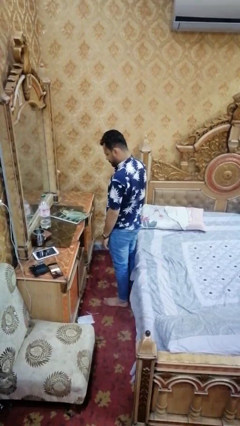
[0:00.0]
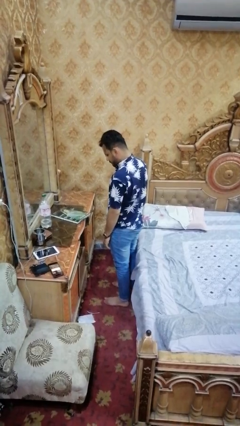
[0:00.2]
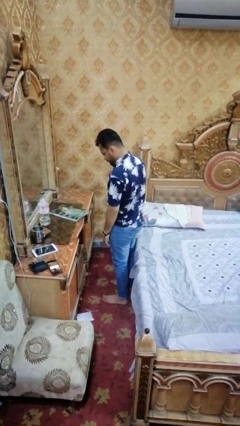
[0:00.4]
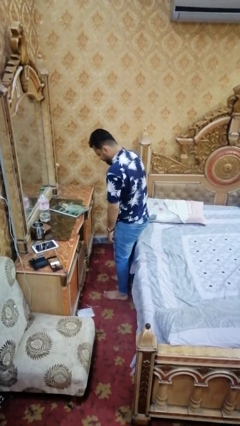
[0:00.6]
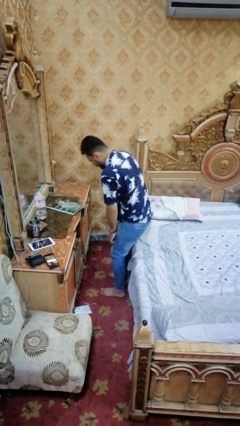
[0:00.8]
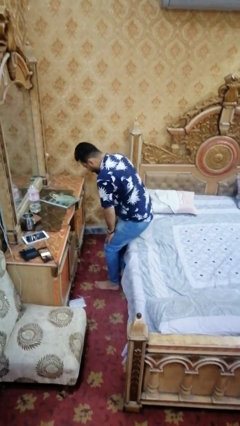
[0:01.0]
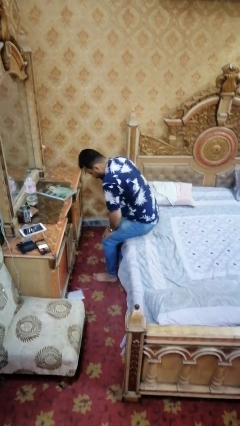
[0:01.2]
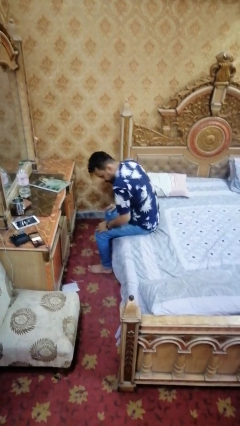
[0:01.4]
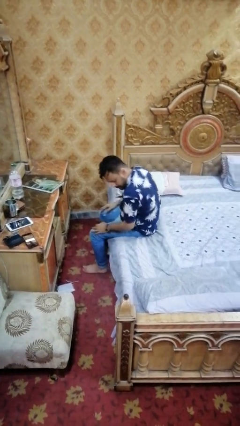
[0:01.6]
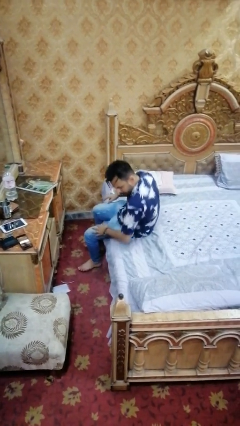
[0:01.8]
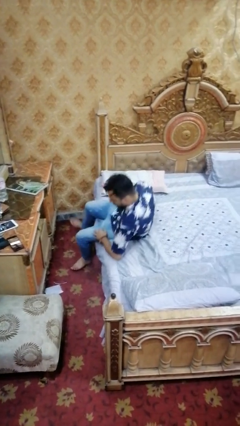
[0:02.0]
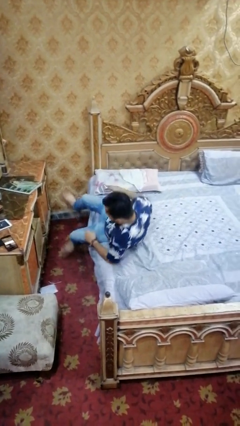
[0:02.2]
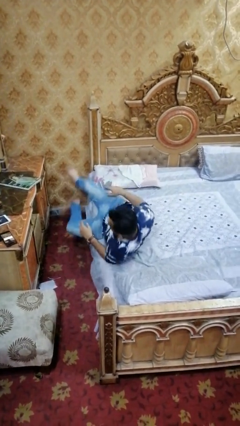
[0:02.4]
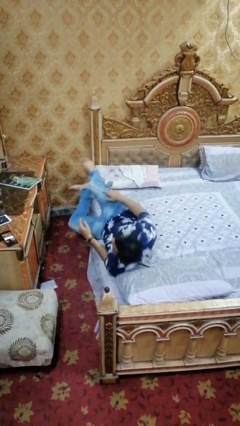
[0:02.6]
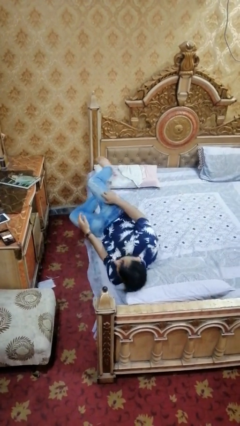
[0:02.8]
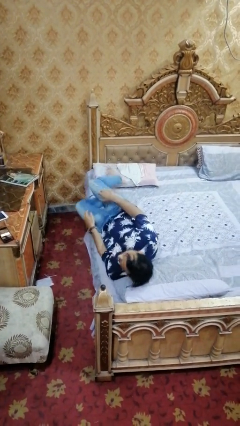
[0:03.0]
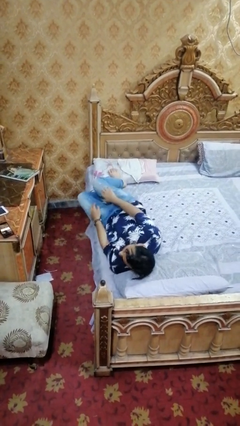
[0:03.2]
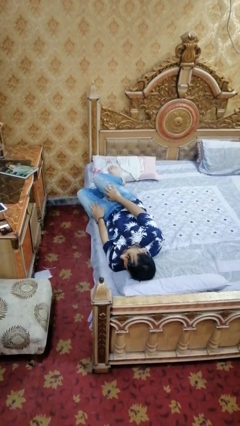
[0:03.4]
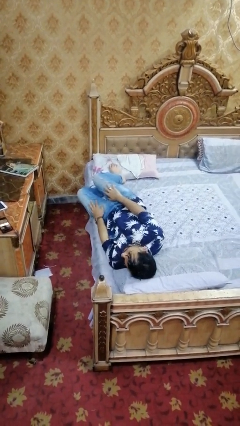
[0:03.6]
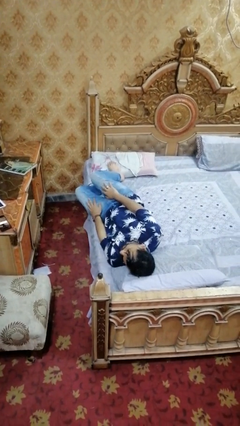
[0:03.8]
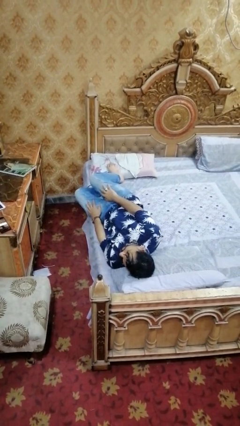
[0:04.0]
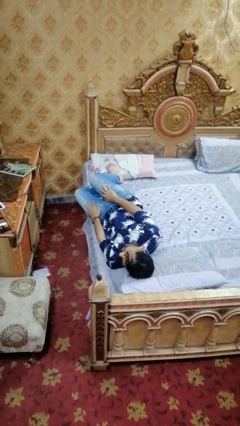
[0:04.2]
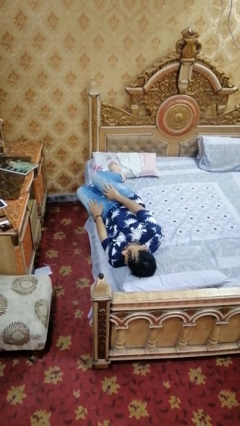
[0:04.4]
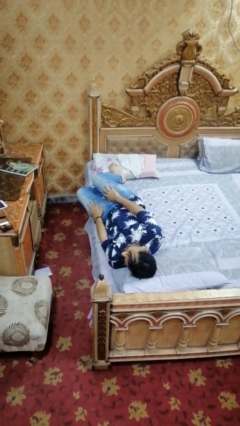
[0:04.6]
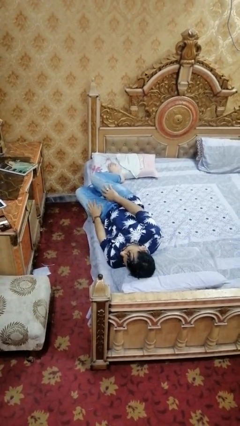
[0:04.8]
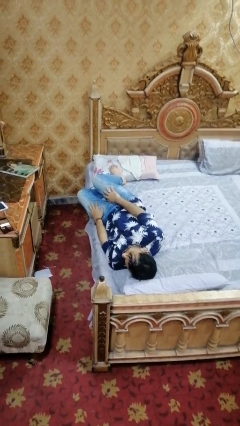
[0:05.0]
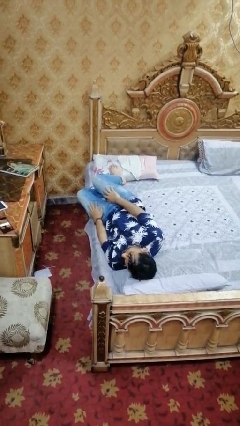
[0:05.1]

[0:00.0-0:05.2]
person lies down on bed

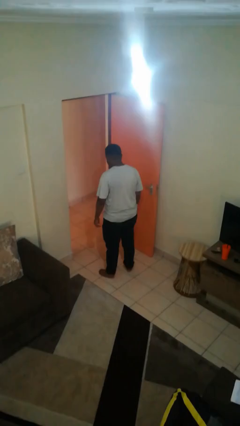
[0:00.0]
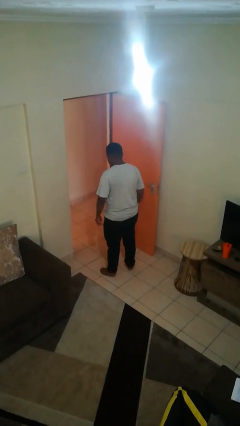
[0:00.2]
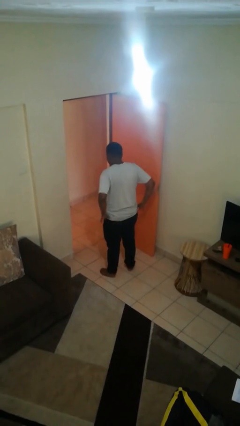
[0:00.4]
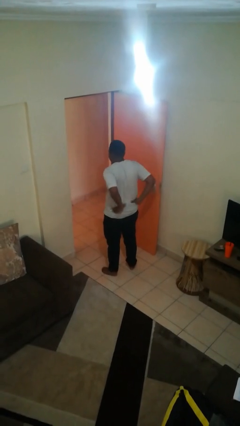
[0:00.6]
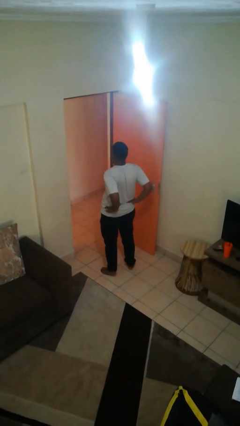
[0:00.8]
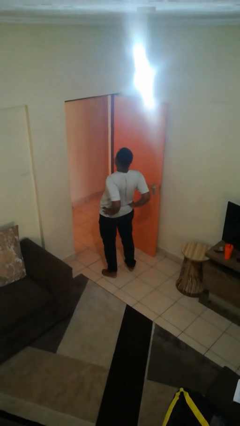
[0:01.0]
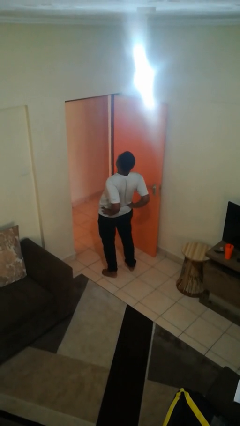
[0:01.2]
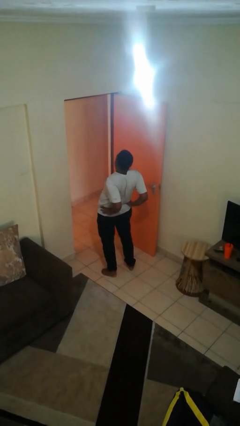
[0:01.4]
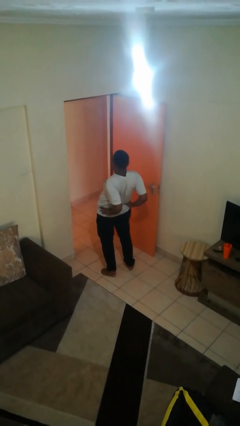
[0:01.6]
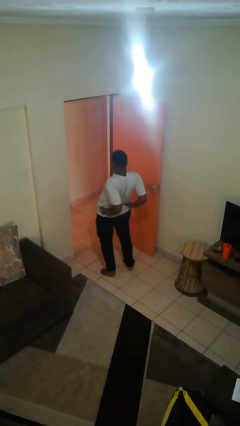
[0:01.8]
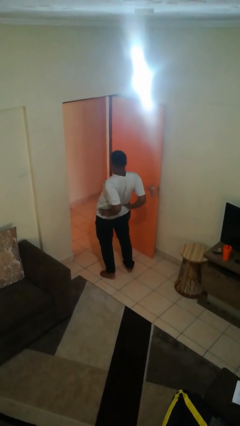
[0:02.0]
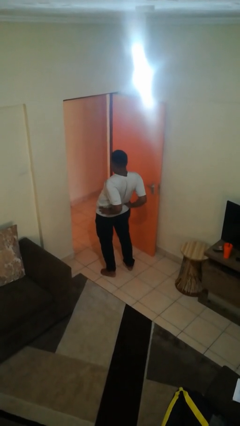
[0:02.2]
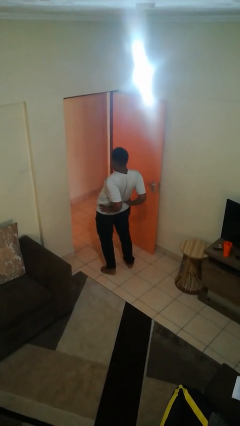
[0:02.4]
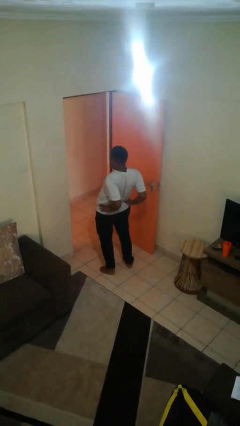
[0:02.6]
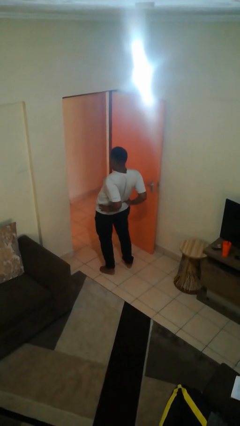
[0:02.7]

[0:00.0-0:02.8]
person stretches back

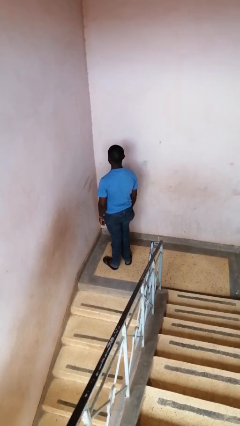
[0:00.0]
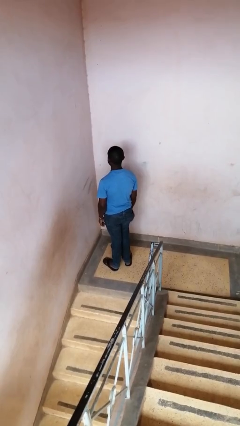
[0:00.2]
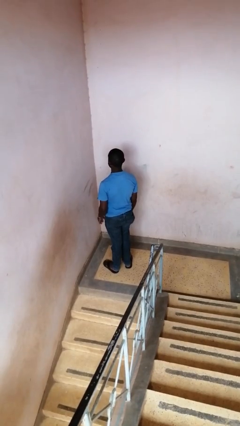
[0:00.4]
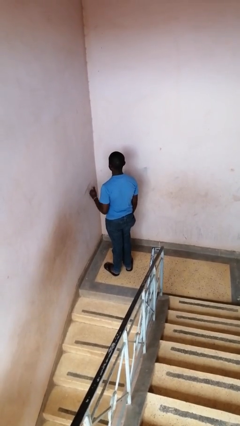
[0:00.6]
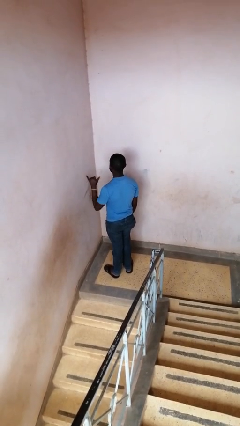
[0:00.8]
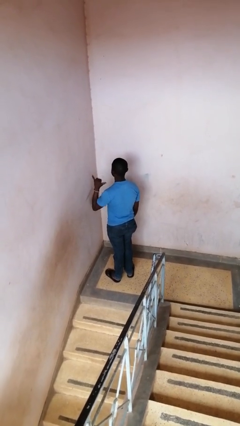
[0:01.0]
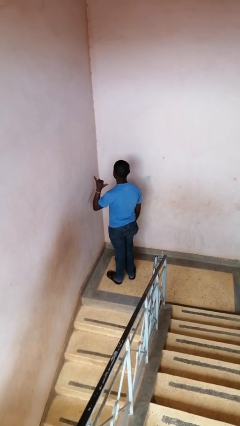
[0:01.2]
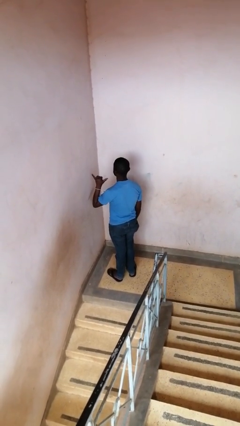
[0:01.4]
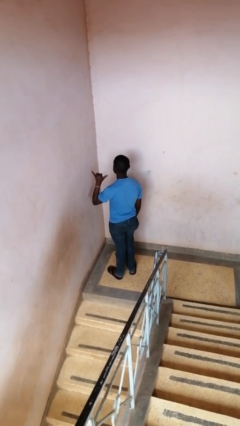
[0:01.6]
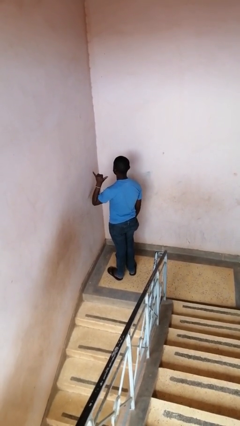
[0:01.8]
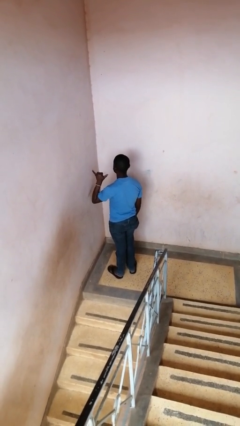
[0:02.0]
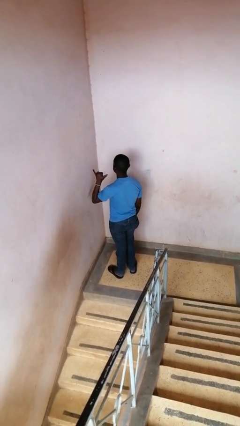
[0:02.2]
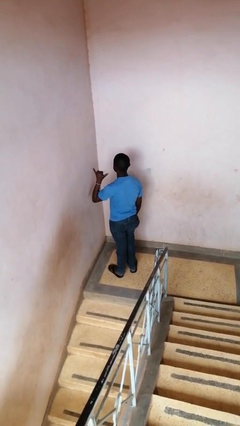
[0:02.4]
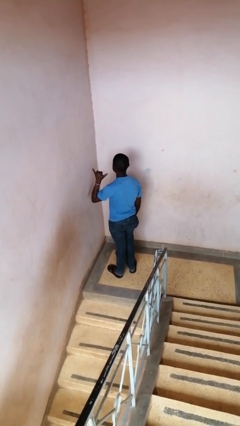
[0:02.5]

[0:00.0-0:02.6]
person gestures hang loose

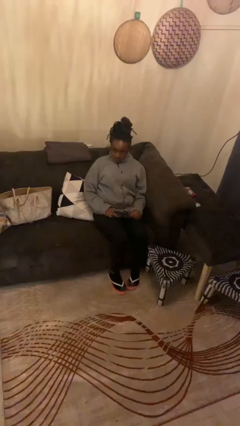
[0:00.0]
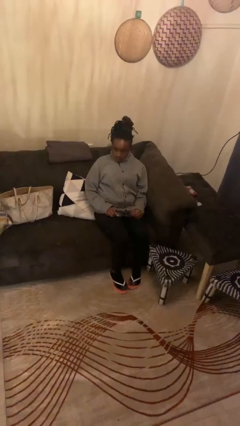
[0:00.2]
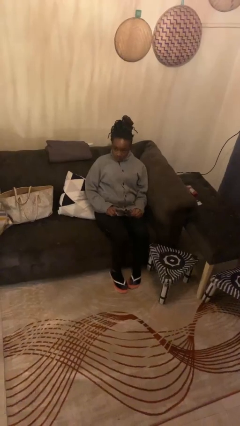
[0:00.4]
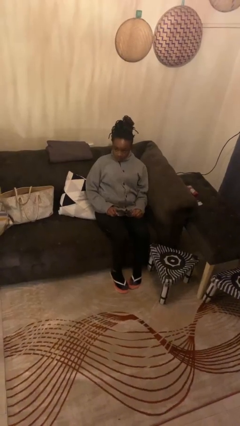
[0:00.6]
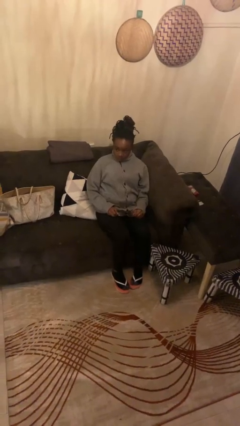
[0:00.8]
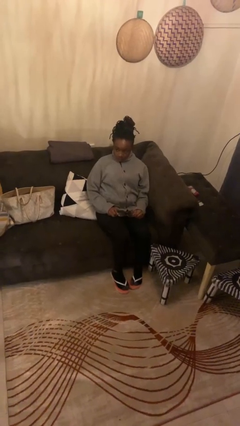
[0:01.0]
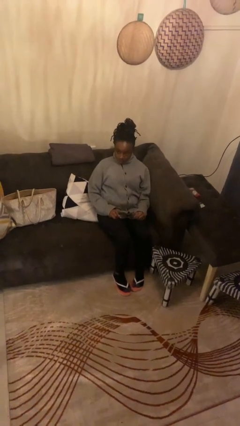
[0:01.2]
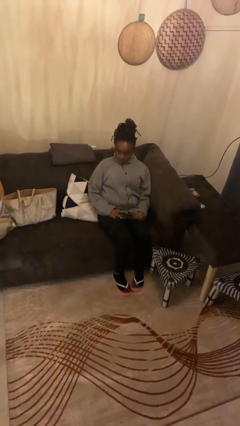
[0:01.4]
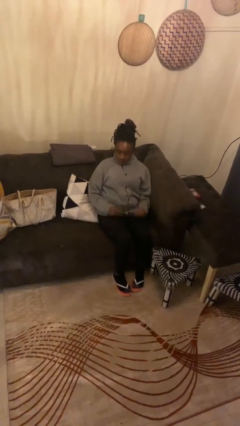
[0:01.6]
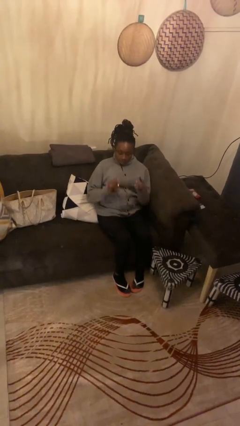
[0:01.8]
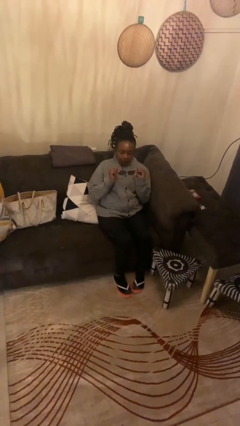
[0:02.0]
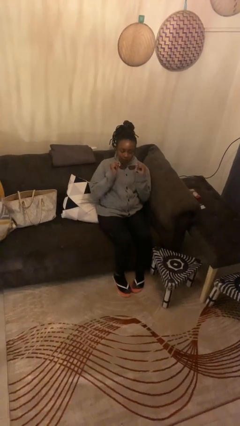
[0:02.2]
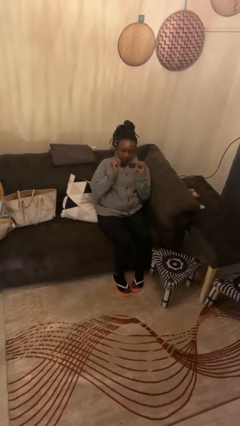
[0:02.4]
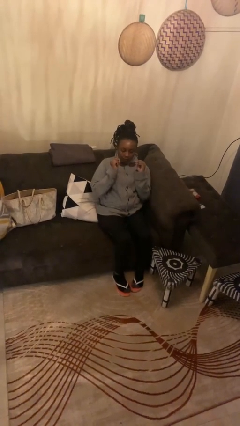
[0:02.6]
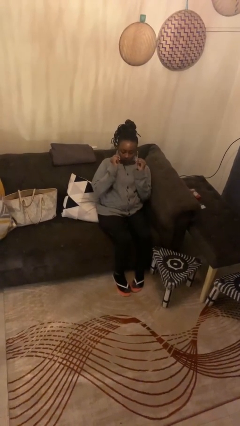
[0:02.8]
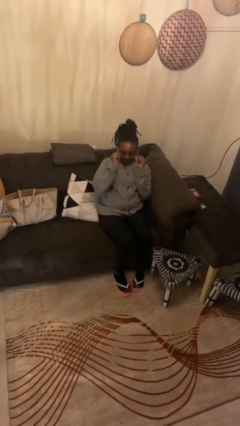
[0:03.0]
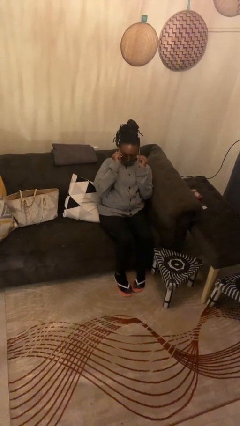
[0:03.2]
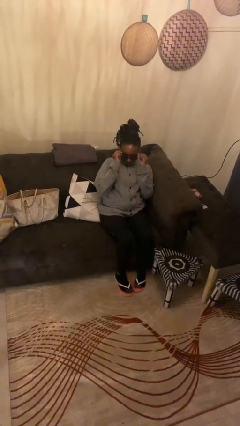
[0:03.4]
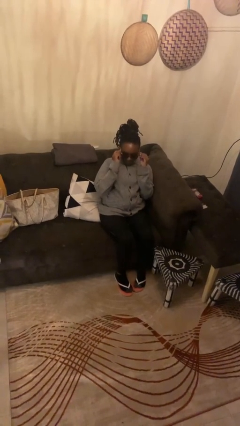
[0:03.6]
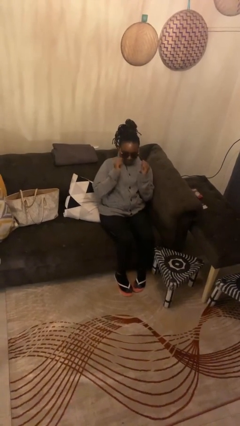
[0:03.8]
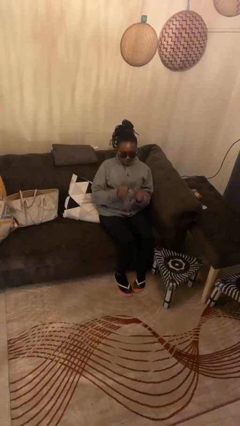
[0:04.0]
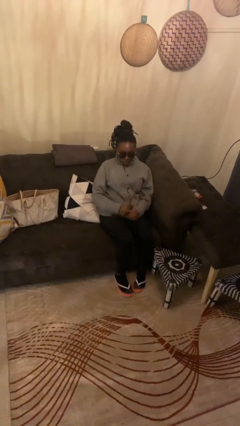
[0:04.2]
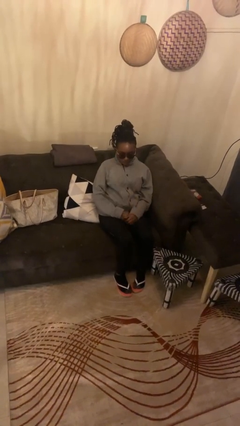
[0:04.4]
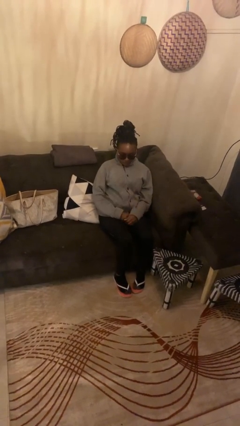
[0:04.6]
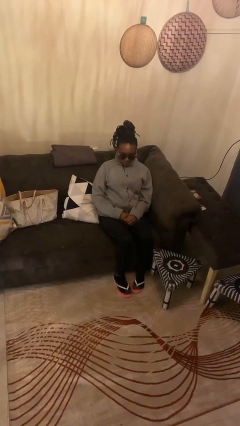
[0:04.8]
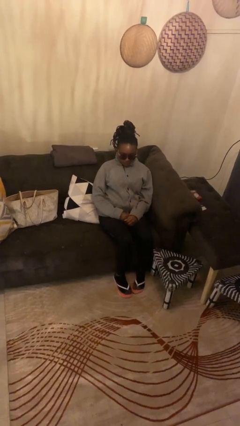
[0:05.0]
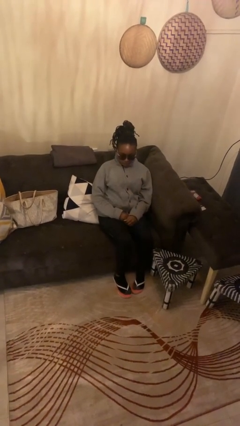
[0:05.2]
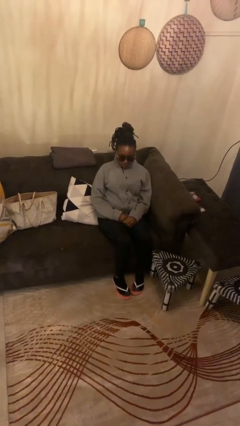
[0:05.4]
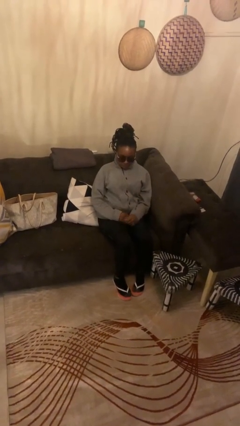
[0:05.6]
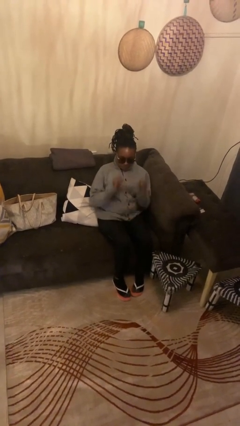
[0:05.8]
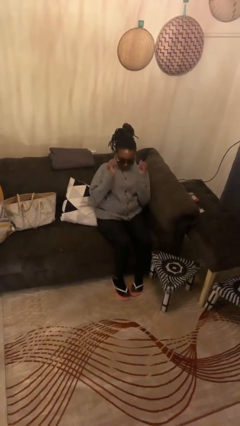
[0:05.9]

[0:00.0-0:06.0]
person puts on sunglasses

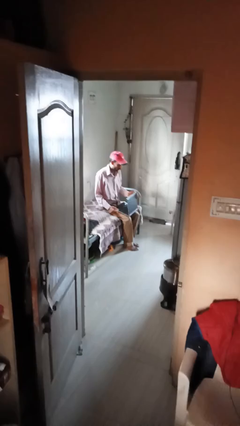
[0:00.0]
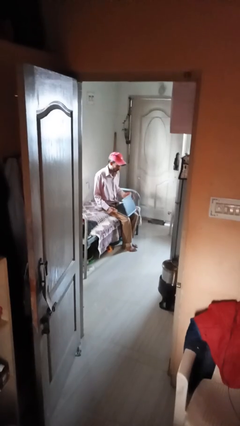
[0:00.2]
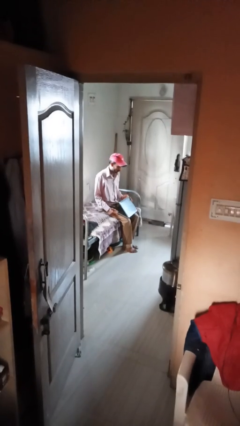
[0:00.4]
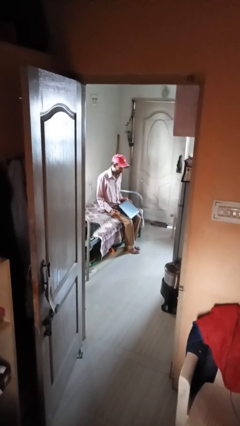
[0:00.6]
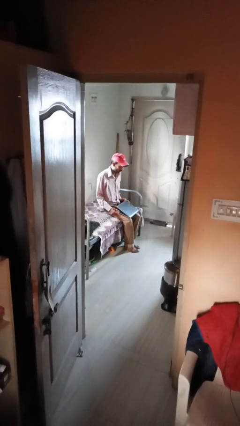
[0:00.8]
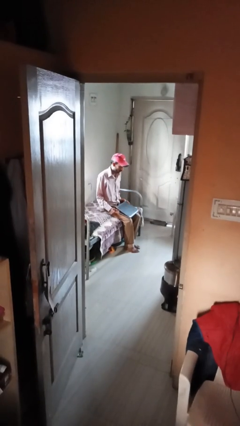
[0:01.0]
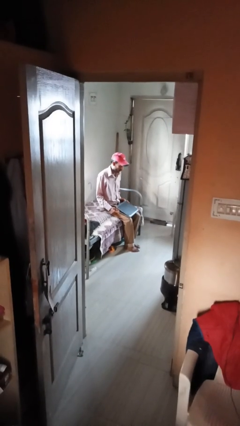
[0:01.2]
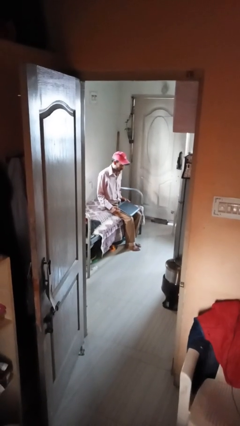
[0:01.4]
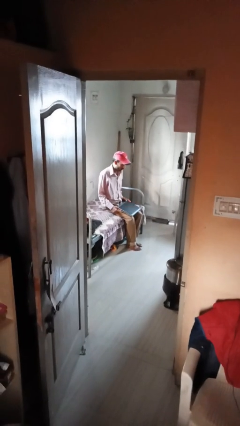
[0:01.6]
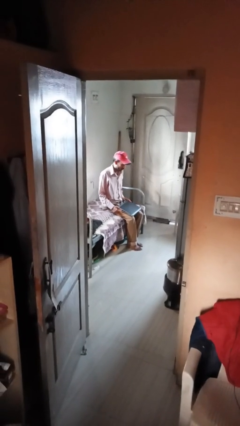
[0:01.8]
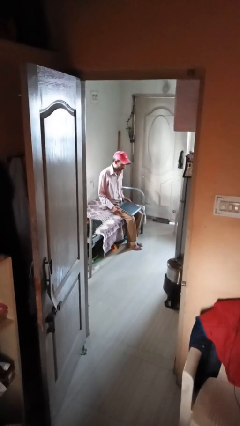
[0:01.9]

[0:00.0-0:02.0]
person closes laptop
